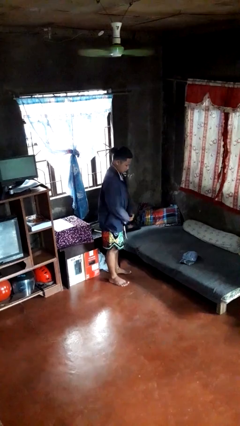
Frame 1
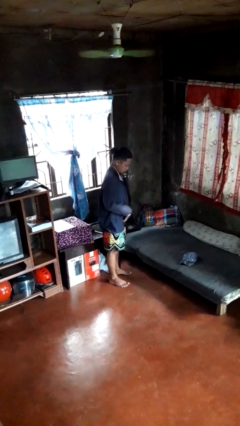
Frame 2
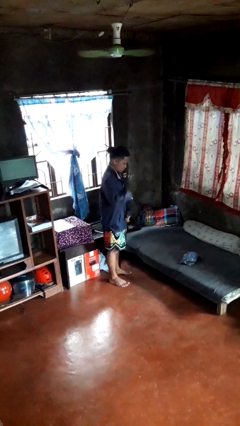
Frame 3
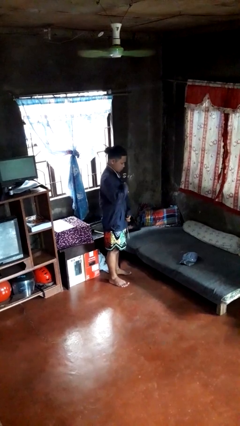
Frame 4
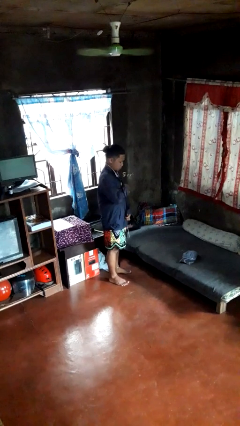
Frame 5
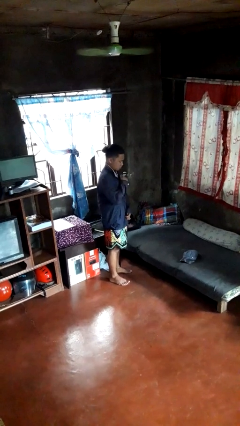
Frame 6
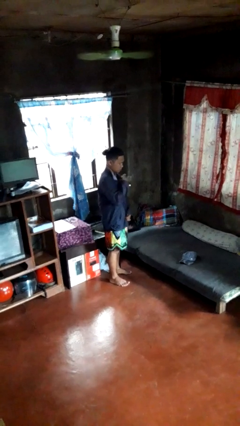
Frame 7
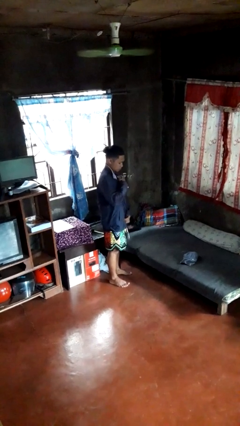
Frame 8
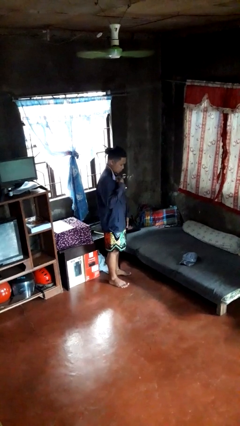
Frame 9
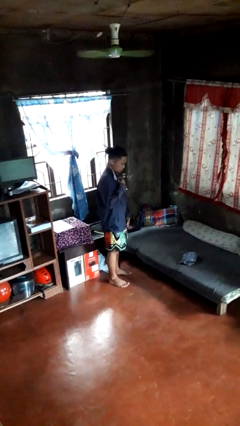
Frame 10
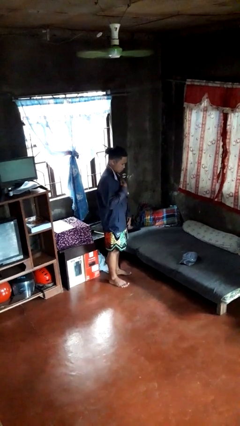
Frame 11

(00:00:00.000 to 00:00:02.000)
person zips up jacket

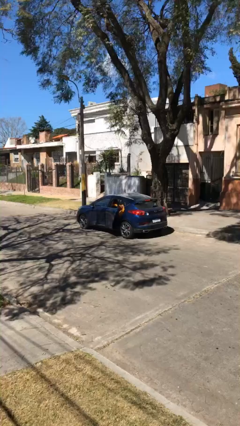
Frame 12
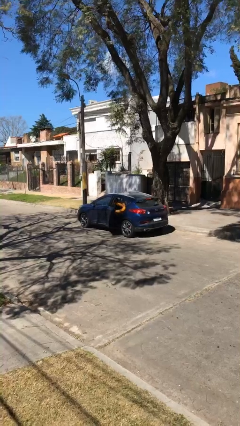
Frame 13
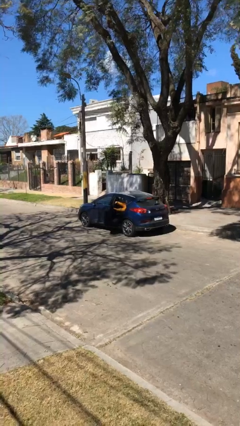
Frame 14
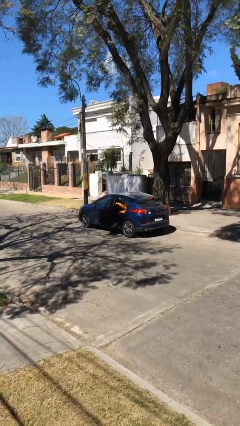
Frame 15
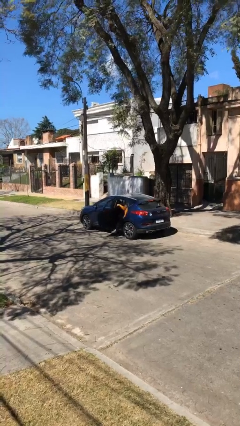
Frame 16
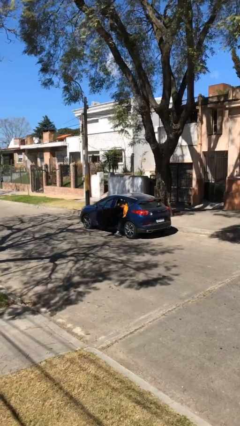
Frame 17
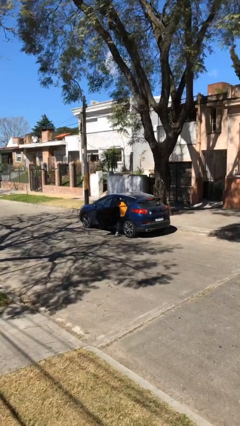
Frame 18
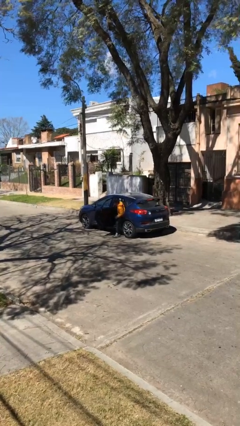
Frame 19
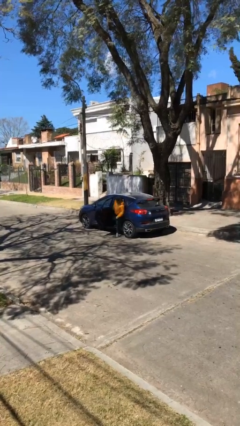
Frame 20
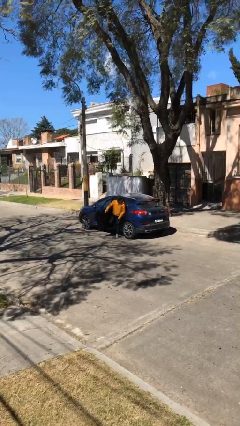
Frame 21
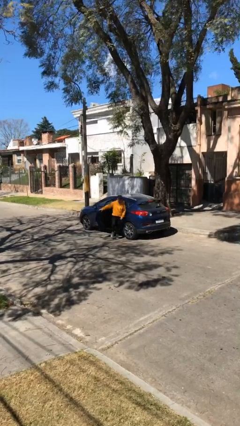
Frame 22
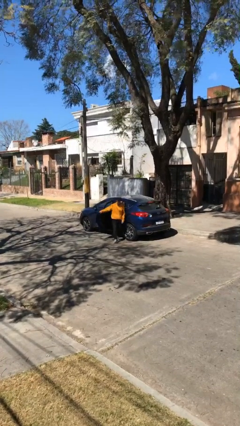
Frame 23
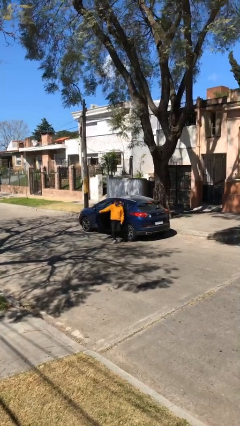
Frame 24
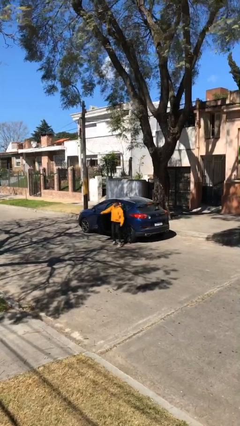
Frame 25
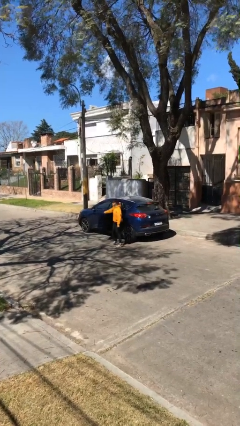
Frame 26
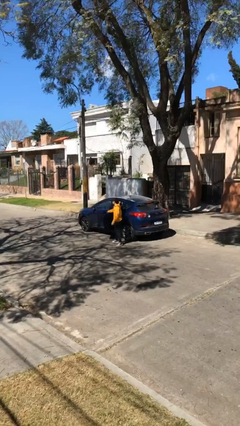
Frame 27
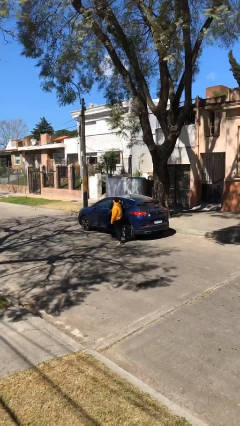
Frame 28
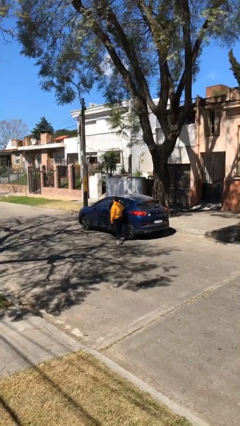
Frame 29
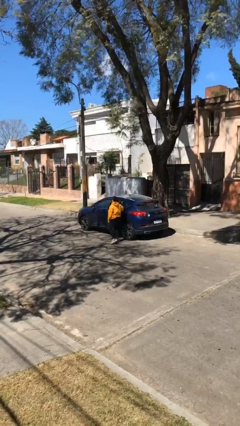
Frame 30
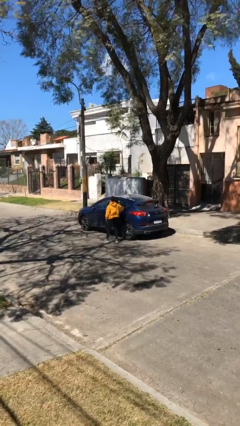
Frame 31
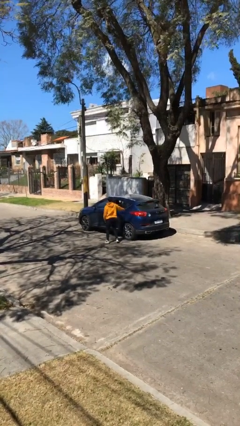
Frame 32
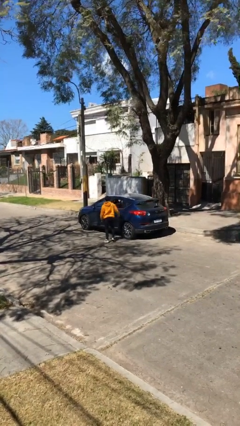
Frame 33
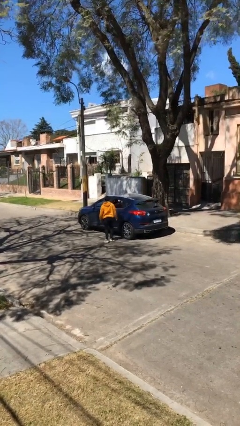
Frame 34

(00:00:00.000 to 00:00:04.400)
car drops off person

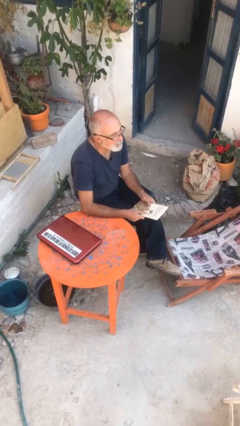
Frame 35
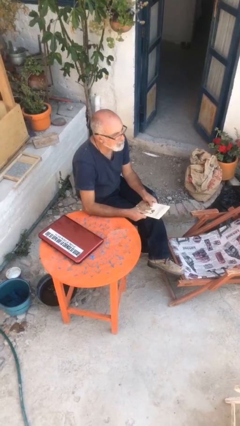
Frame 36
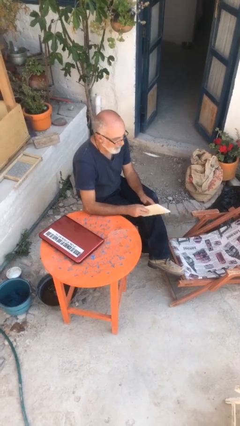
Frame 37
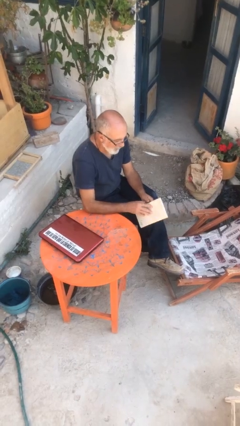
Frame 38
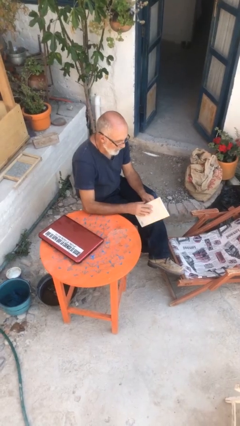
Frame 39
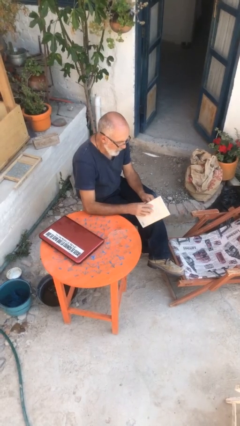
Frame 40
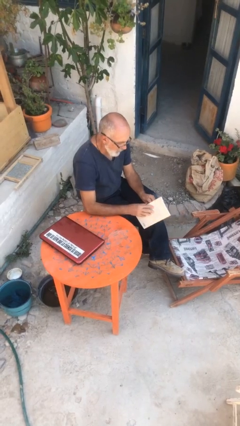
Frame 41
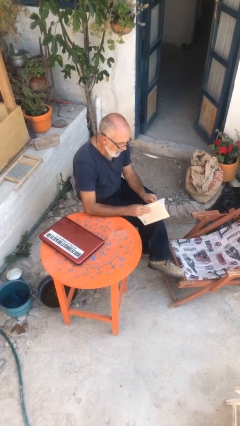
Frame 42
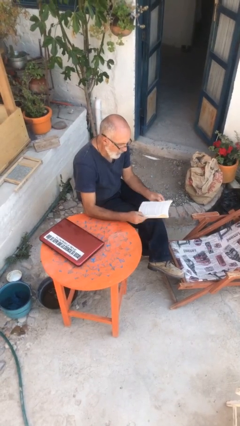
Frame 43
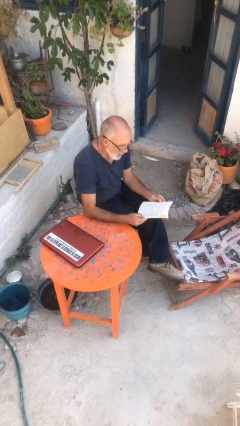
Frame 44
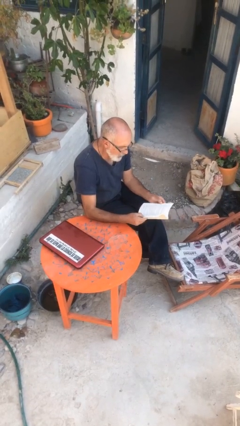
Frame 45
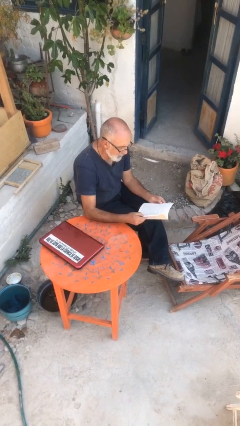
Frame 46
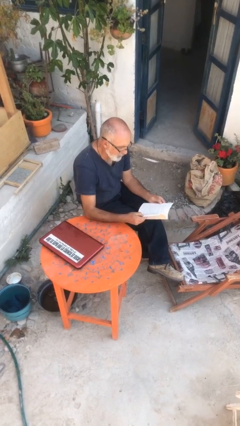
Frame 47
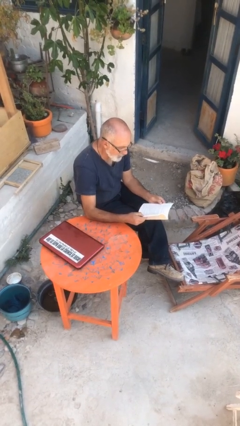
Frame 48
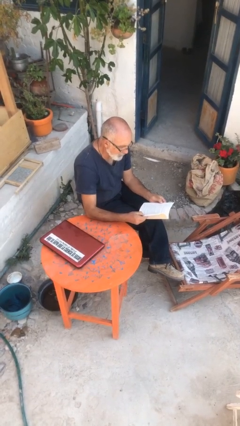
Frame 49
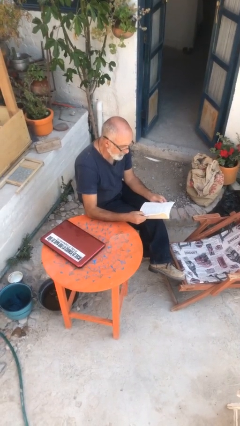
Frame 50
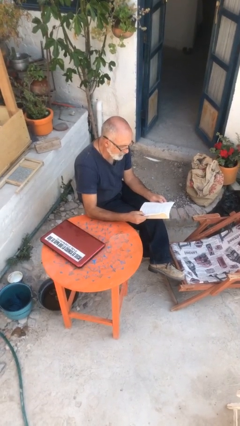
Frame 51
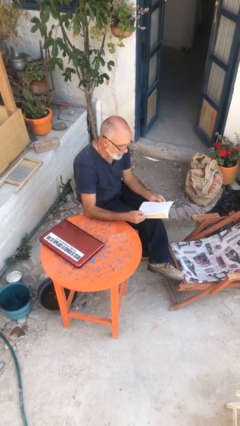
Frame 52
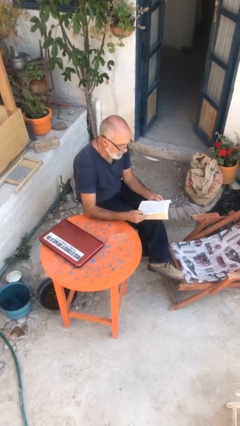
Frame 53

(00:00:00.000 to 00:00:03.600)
person reads document

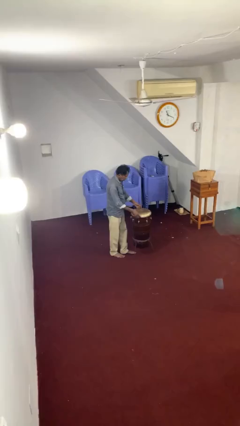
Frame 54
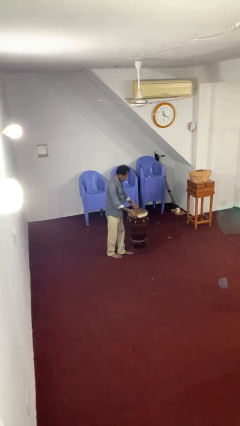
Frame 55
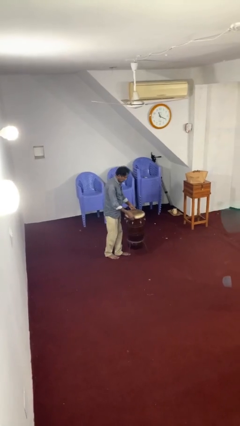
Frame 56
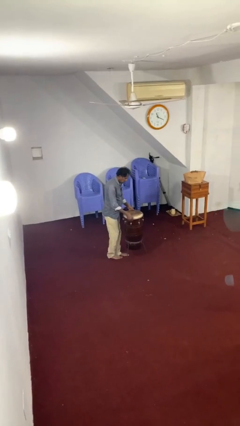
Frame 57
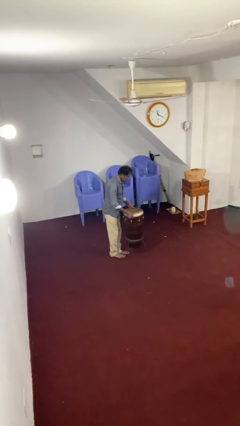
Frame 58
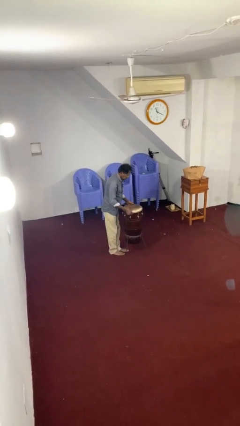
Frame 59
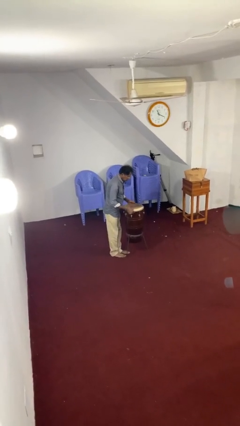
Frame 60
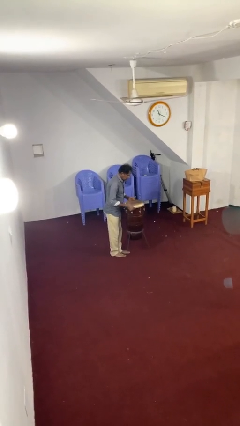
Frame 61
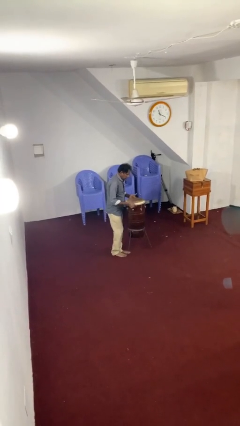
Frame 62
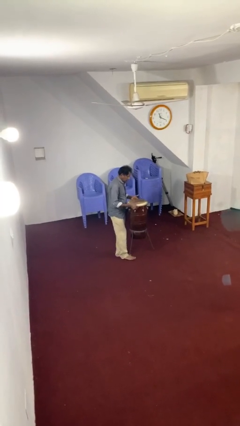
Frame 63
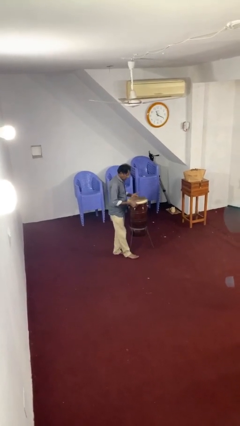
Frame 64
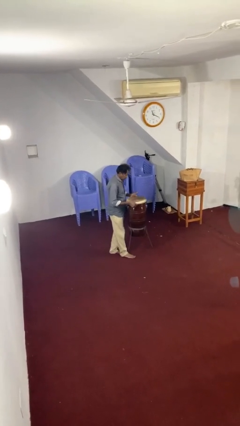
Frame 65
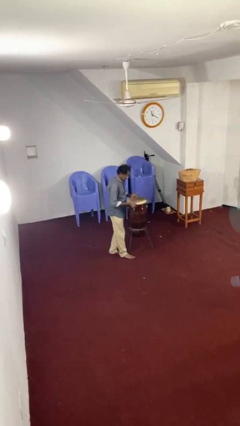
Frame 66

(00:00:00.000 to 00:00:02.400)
person picks up object from floor

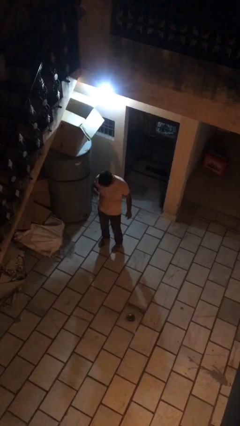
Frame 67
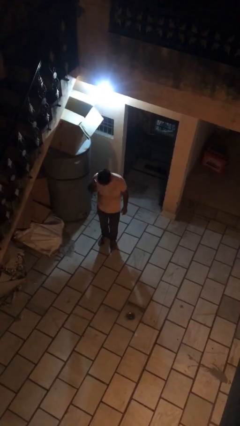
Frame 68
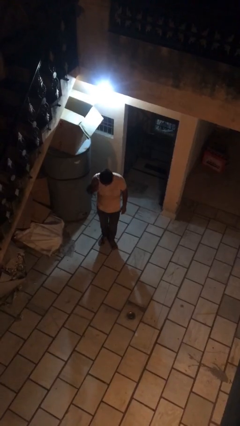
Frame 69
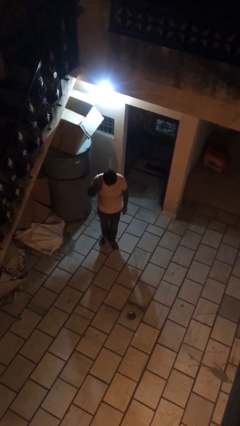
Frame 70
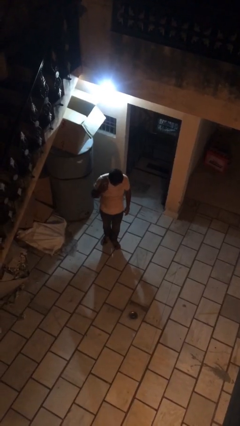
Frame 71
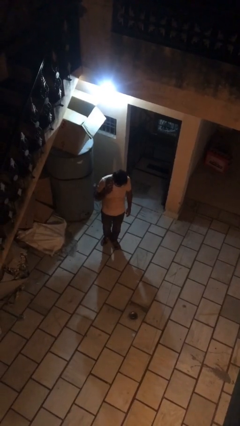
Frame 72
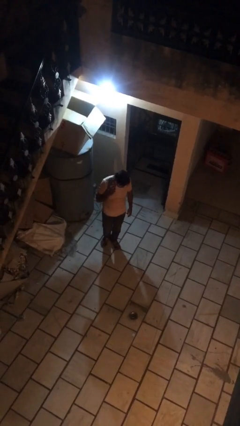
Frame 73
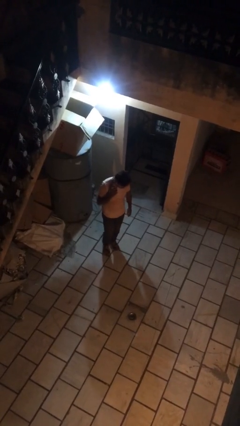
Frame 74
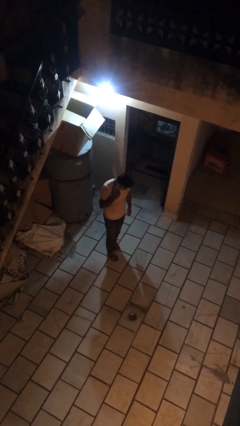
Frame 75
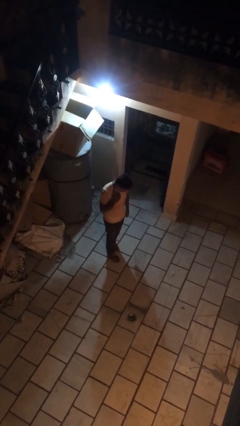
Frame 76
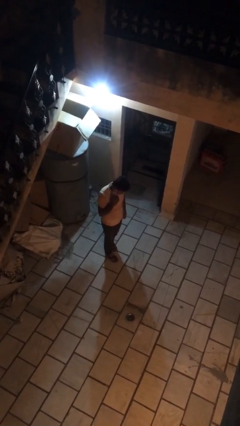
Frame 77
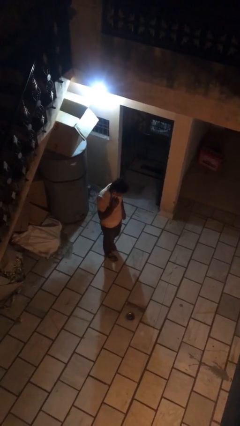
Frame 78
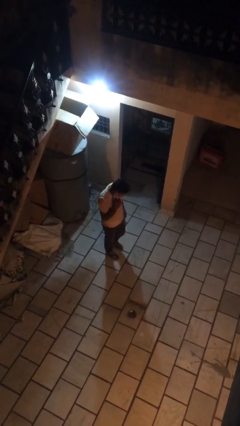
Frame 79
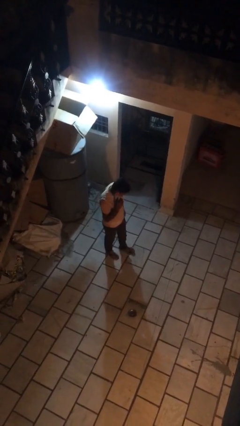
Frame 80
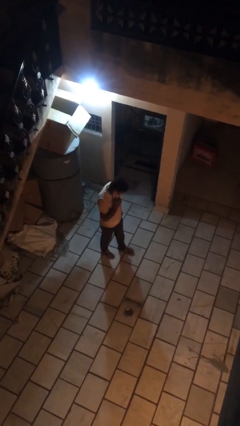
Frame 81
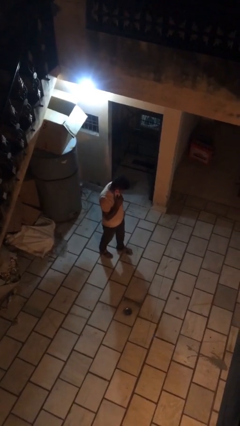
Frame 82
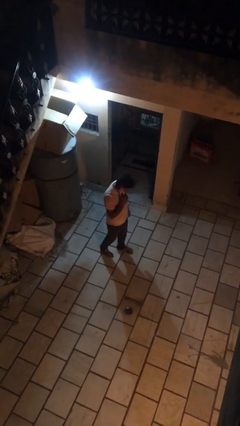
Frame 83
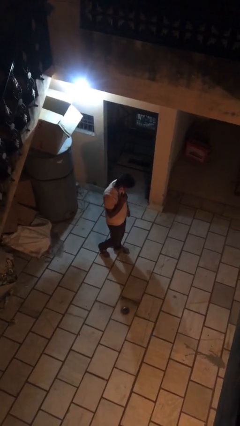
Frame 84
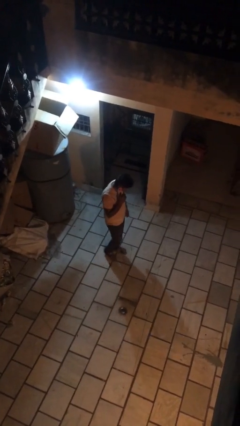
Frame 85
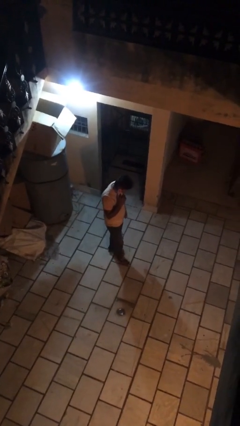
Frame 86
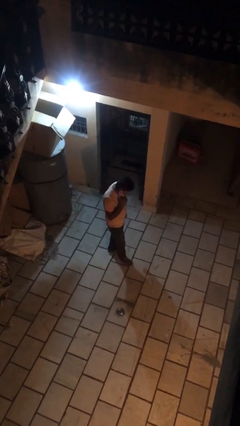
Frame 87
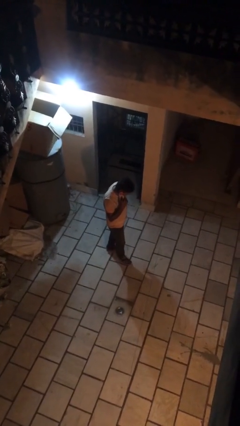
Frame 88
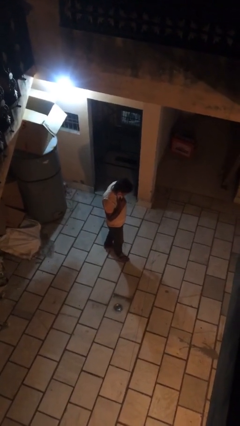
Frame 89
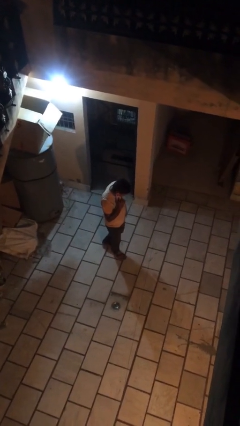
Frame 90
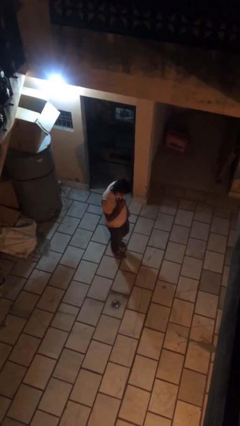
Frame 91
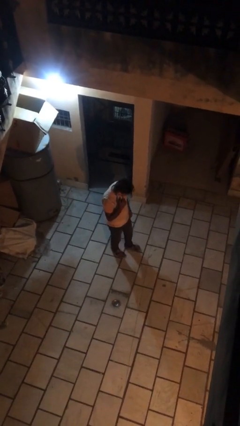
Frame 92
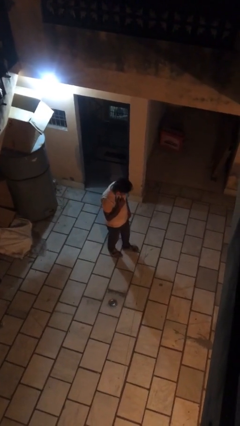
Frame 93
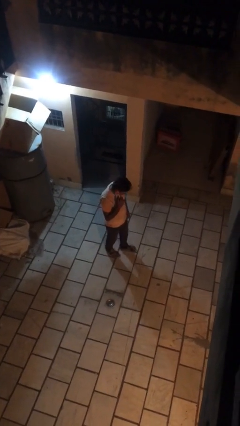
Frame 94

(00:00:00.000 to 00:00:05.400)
person talks on phone
